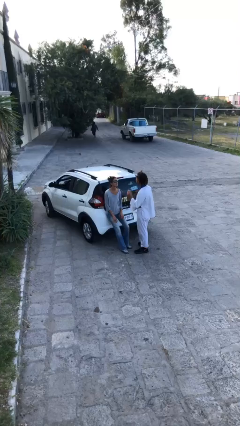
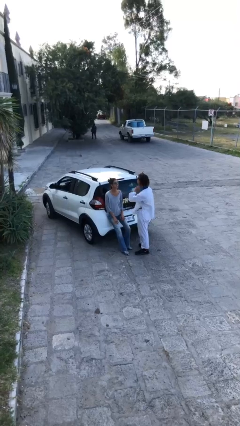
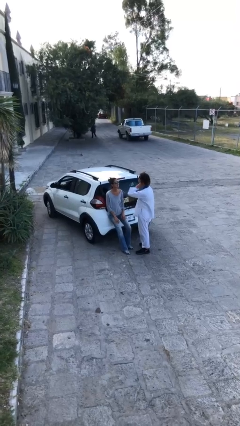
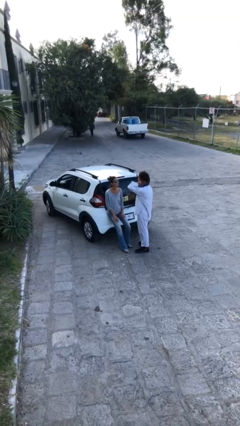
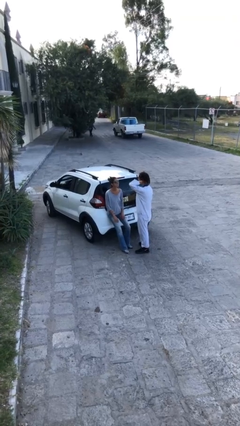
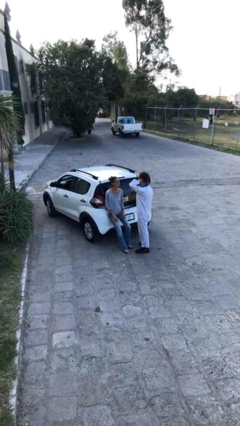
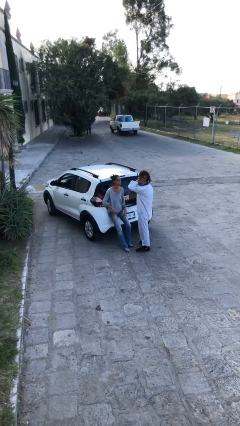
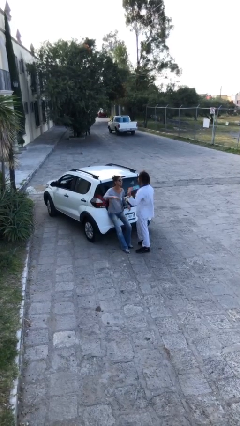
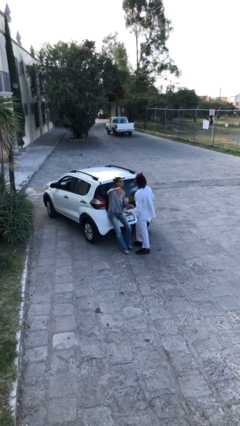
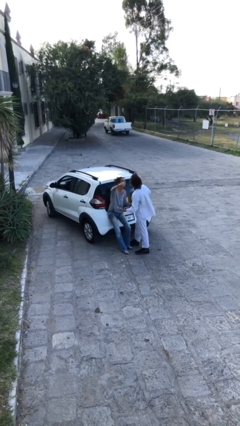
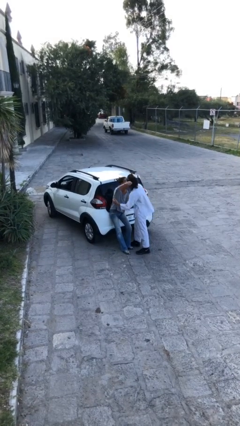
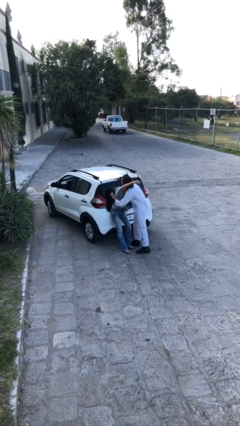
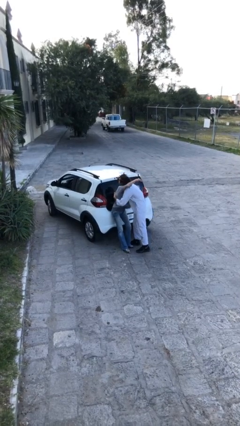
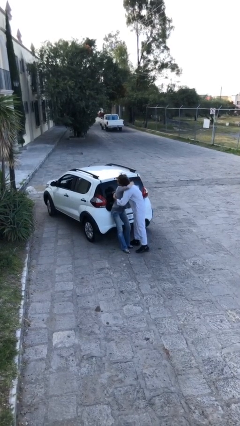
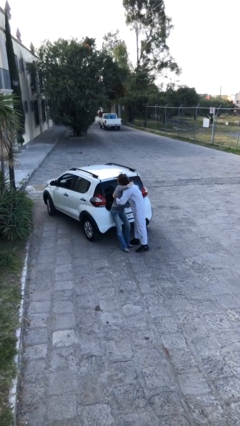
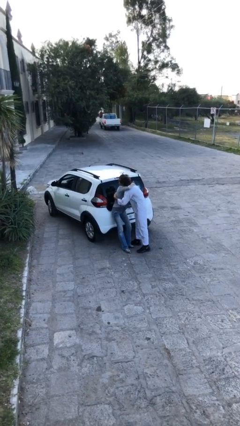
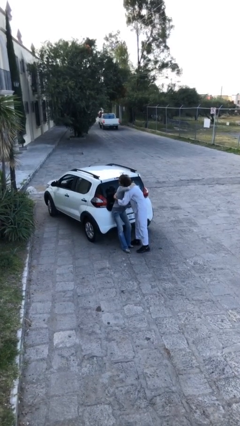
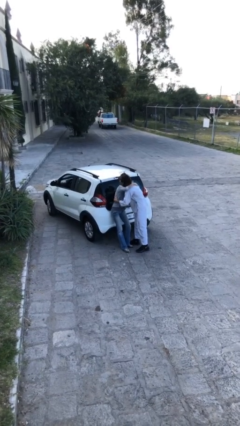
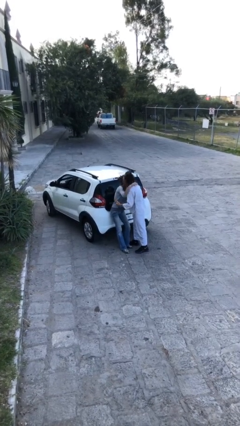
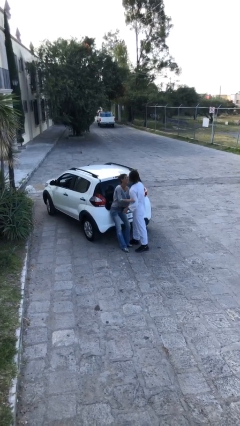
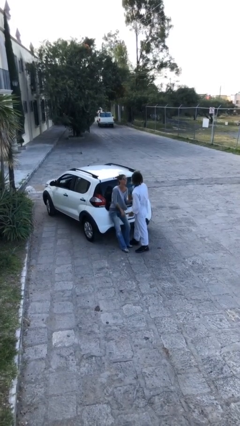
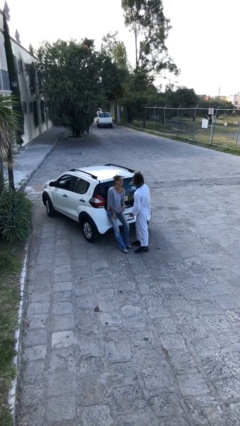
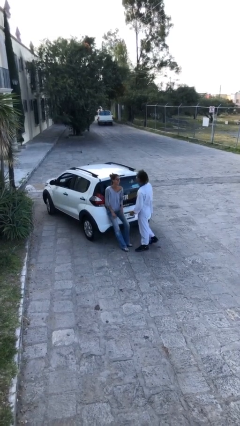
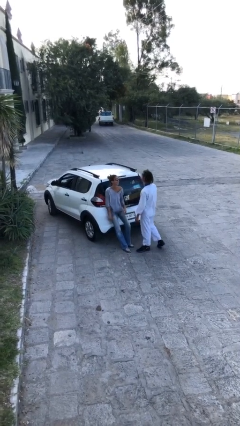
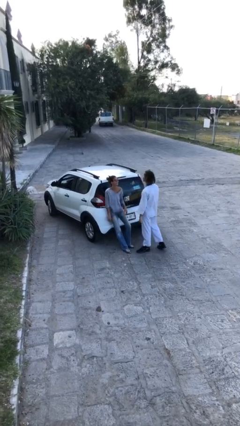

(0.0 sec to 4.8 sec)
person embraces person

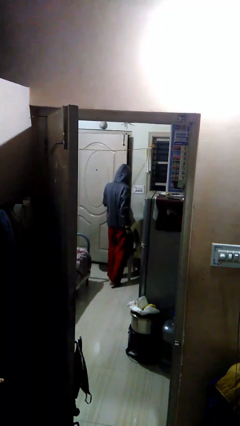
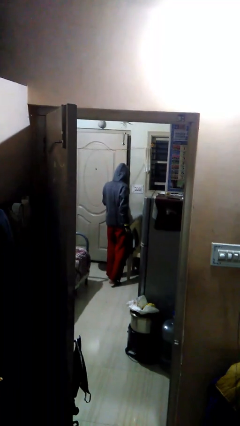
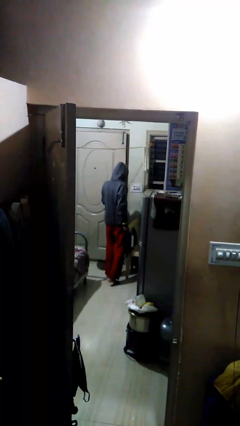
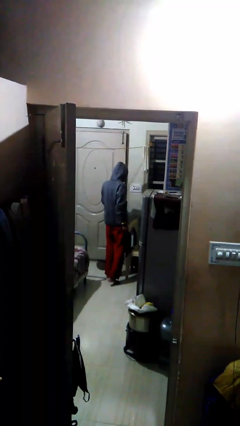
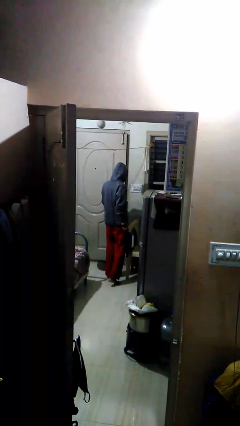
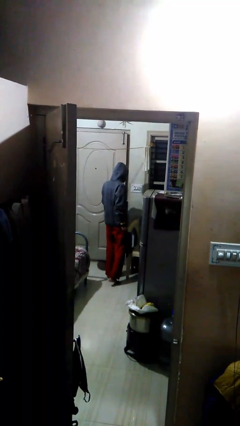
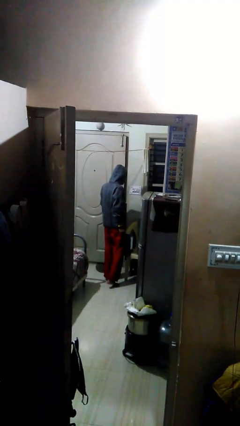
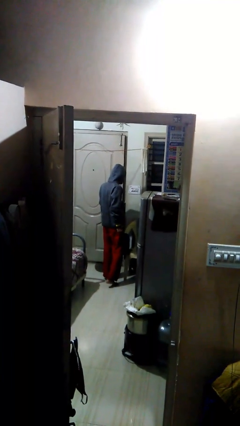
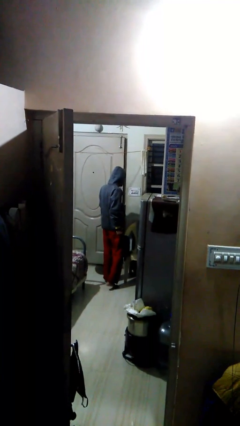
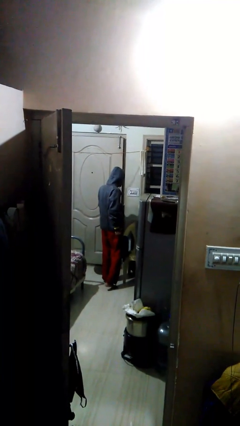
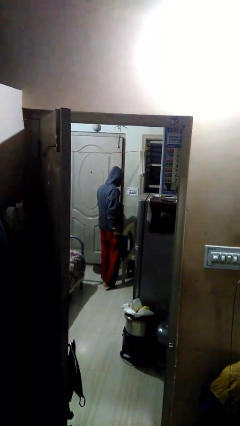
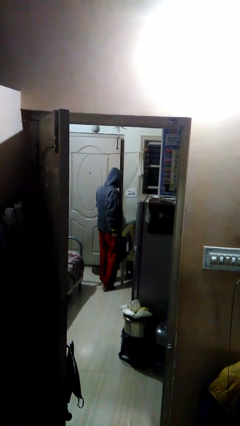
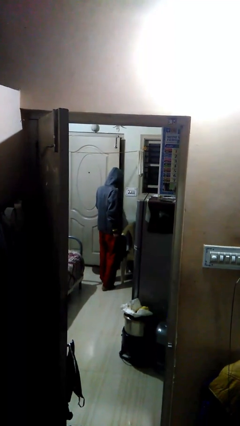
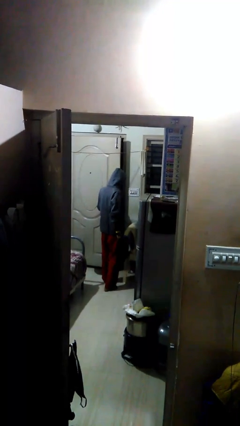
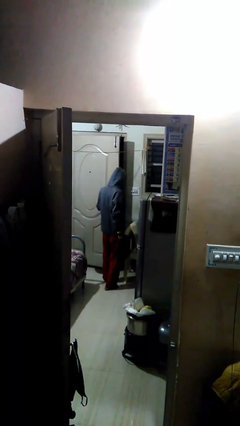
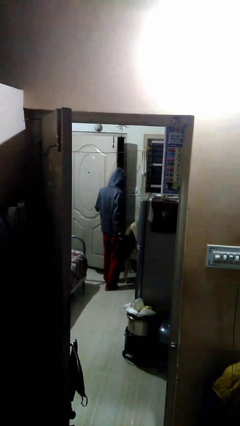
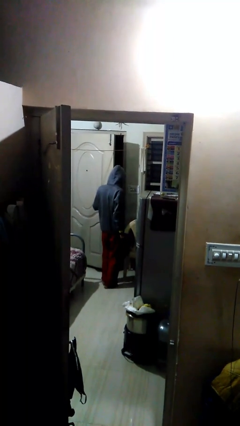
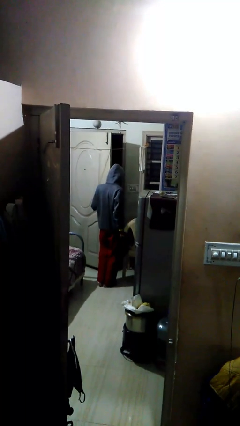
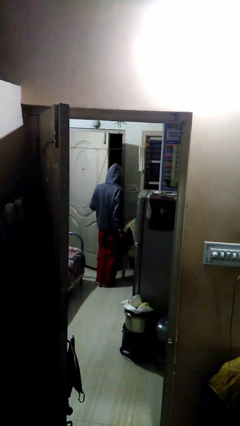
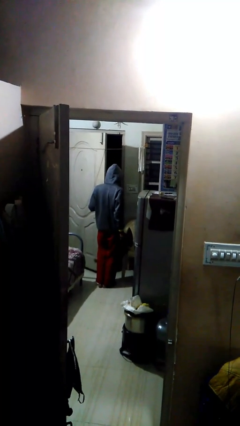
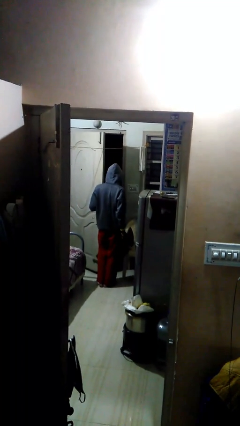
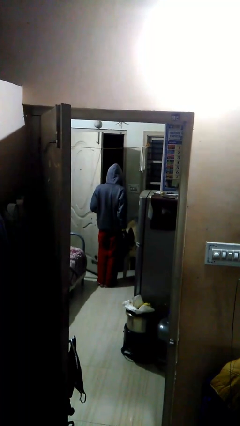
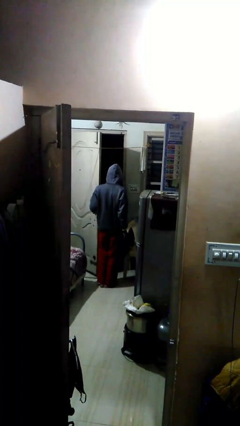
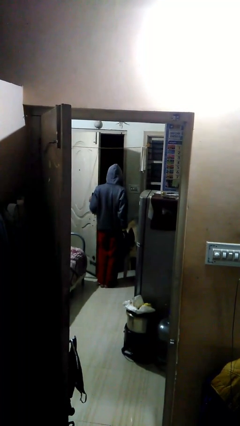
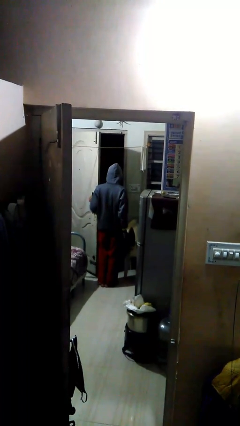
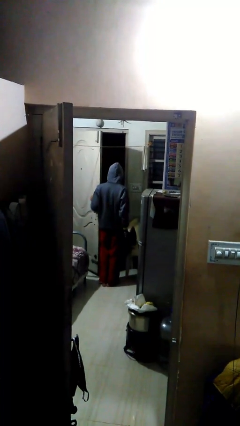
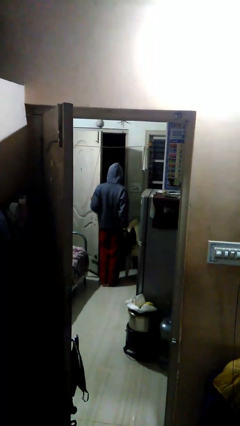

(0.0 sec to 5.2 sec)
person closes facility door

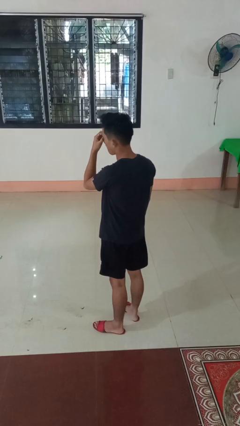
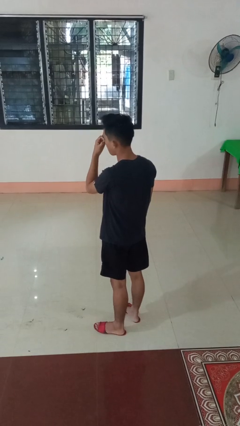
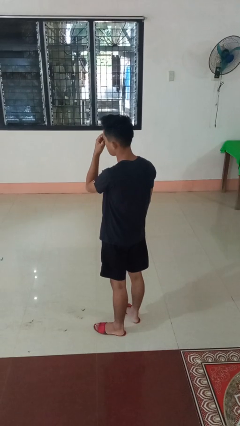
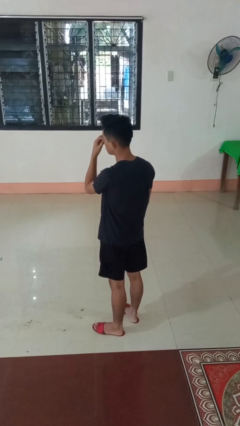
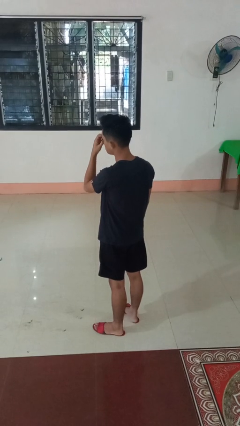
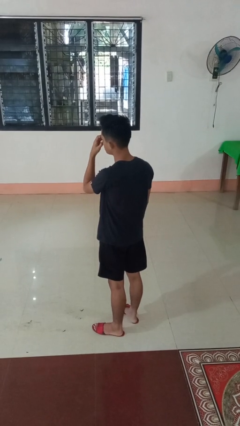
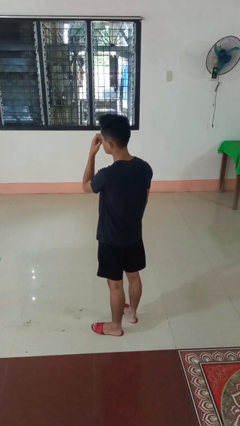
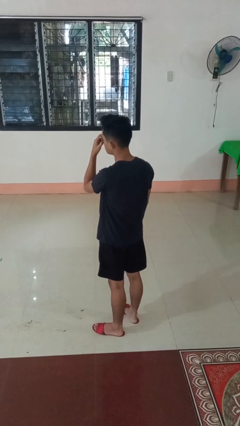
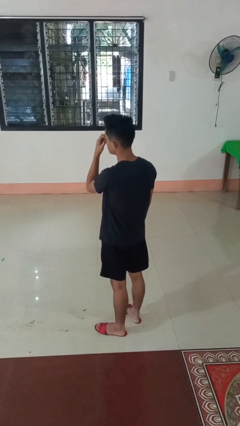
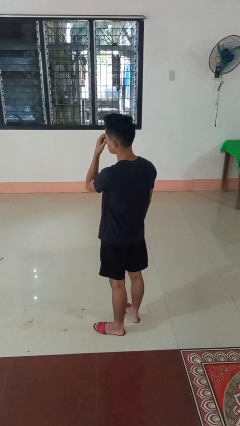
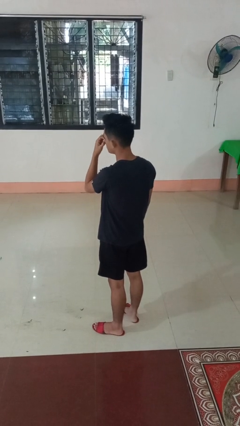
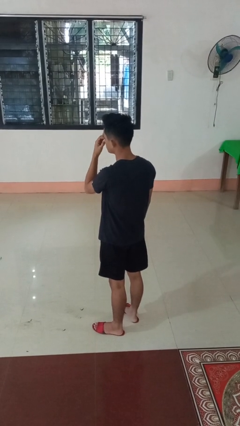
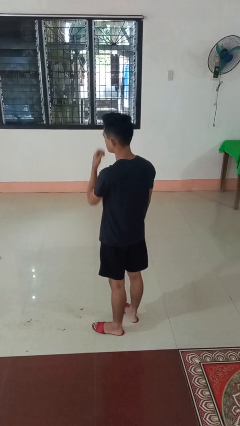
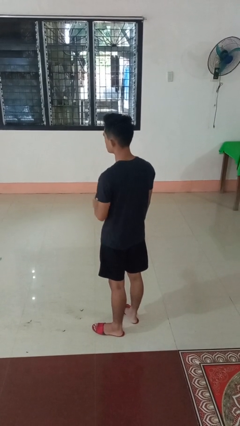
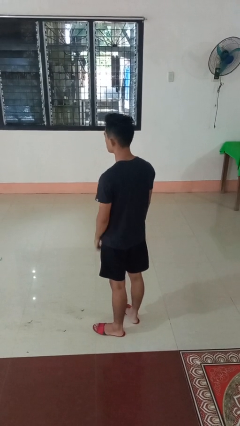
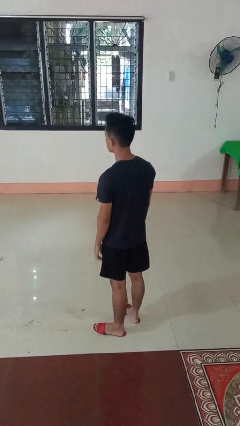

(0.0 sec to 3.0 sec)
person scratches face

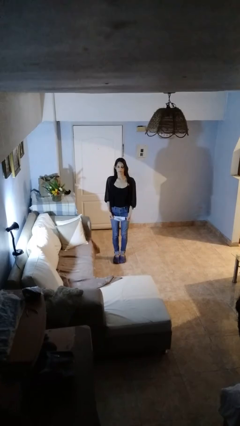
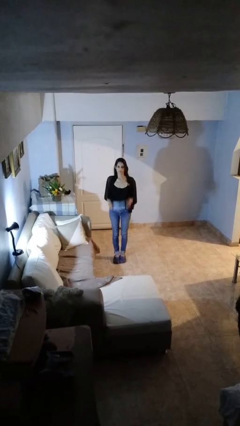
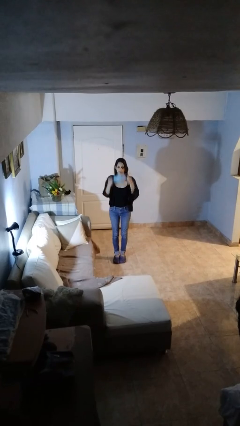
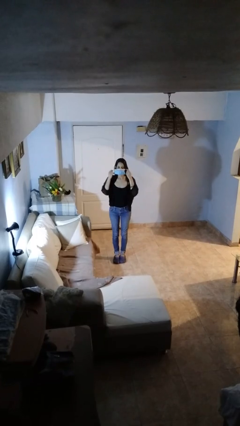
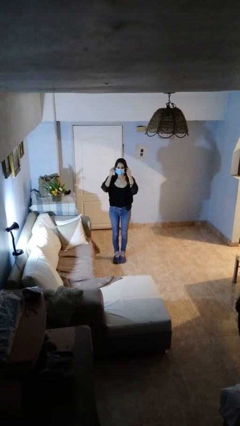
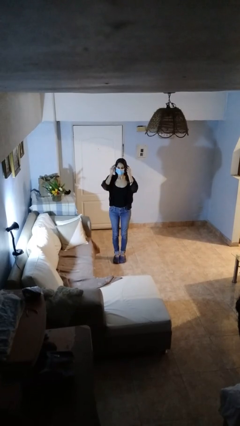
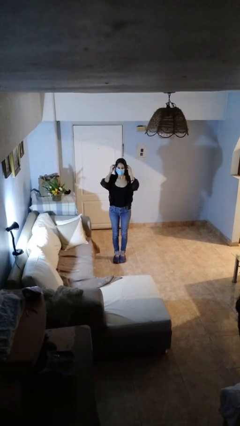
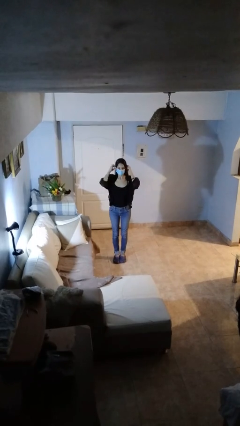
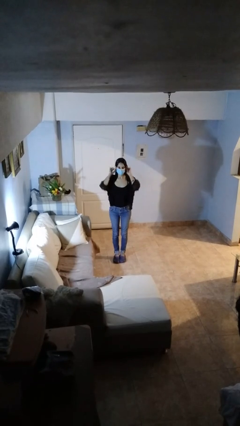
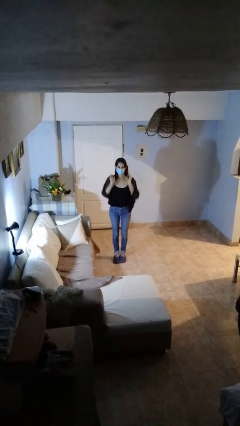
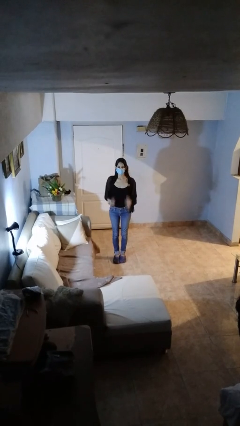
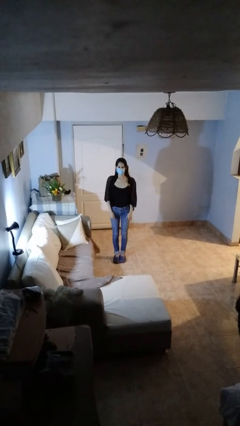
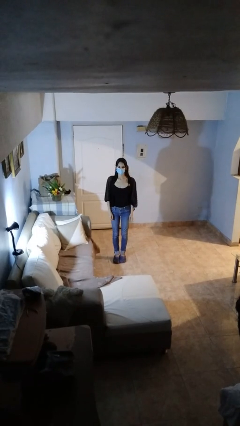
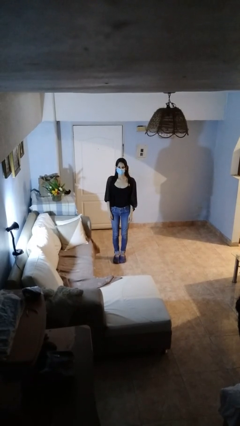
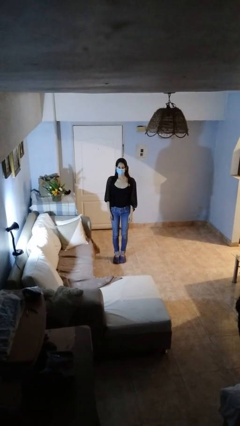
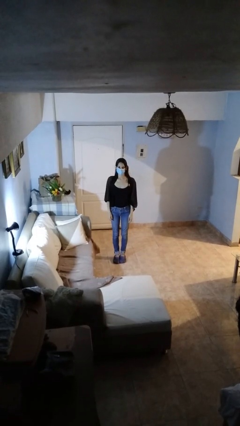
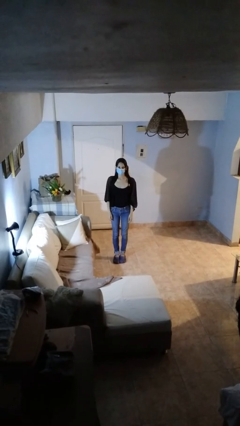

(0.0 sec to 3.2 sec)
person puts on facemask

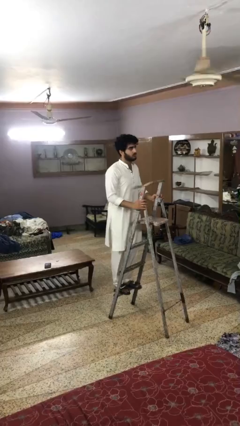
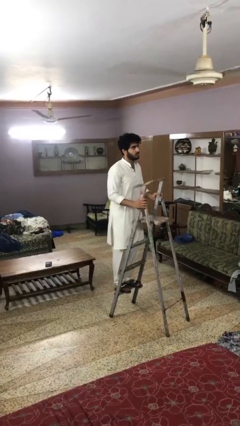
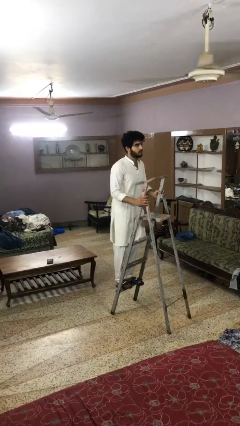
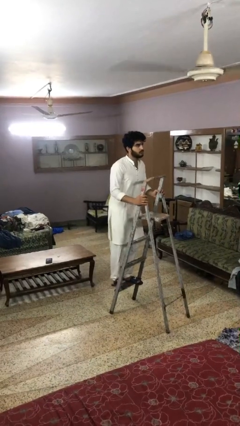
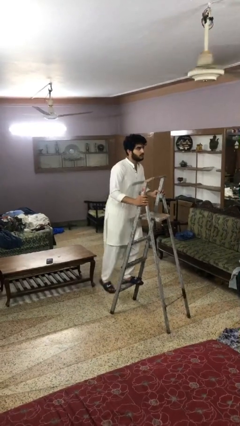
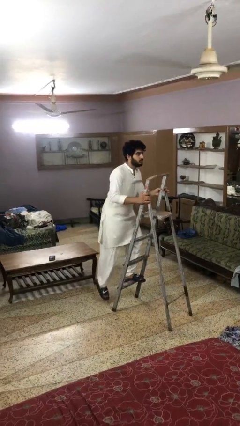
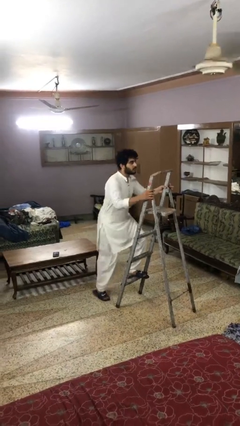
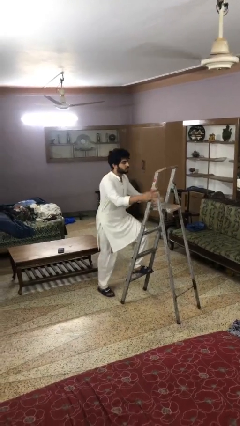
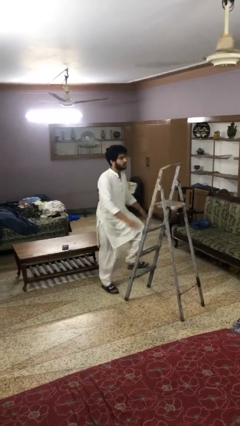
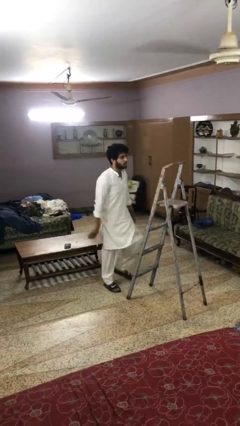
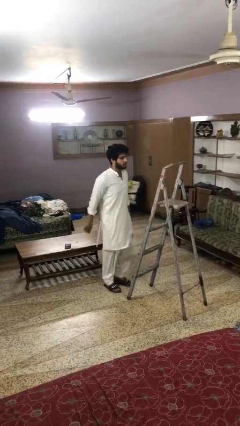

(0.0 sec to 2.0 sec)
person climbs down ladder
